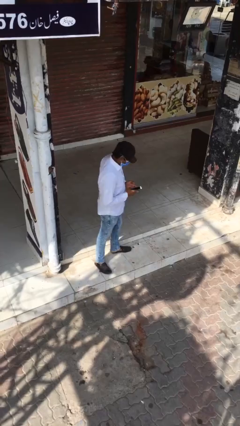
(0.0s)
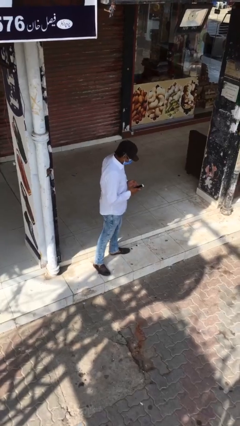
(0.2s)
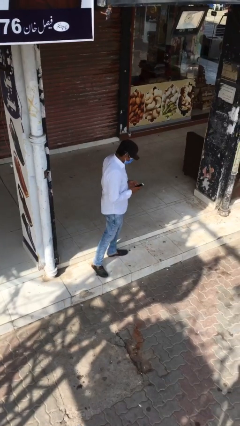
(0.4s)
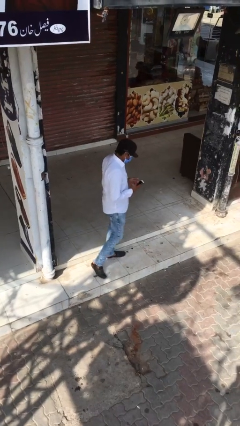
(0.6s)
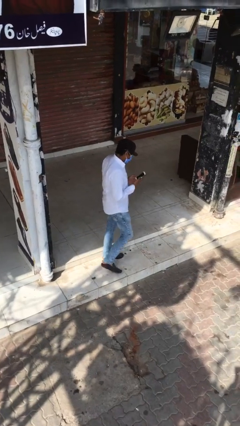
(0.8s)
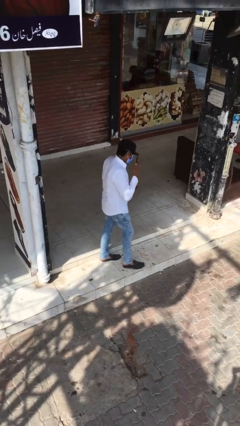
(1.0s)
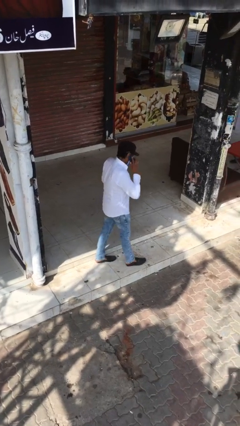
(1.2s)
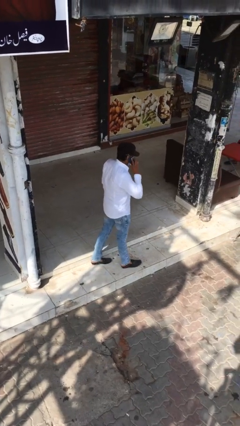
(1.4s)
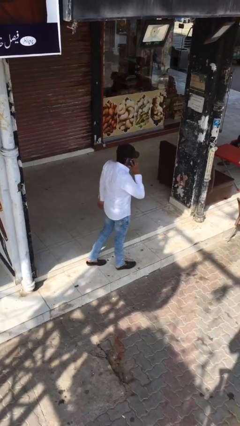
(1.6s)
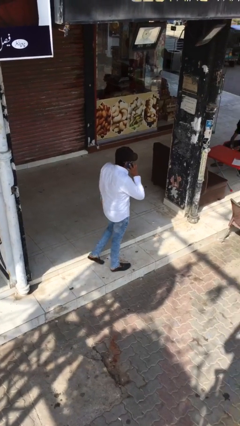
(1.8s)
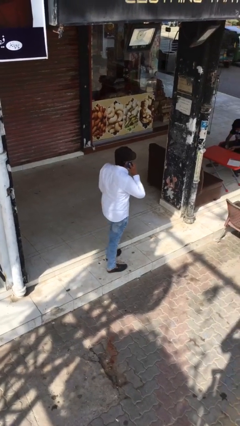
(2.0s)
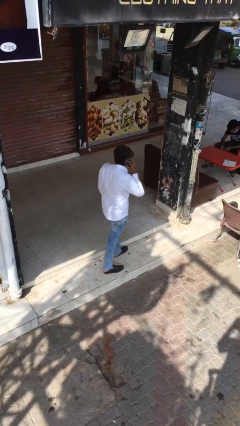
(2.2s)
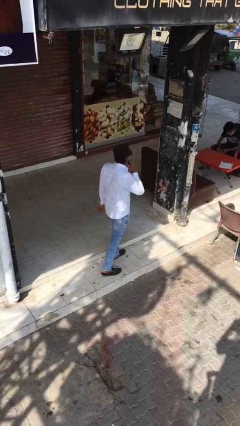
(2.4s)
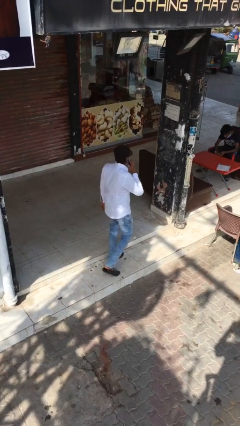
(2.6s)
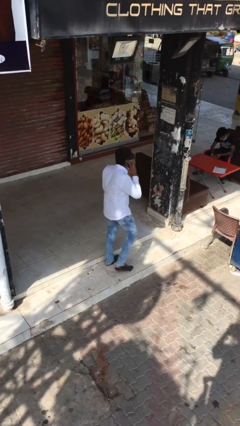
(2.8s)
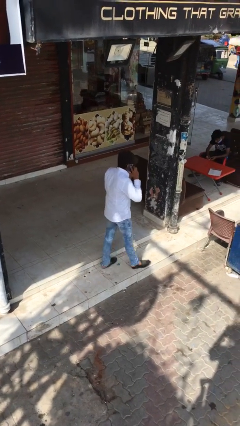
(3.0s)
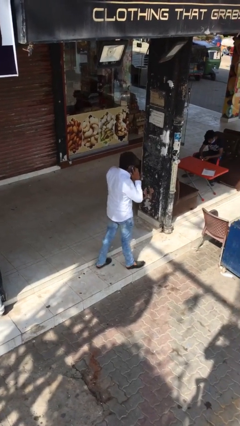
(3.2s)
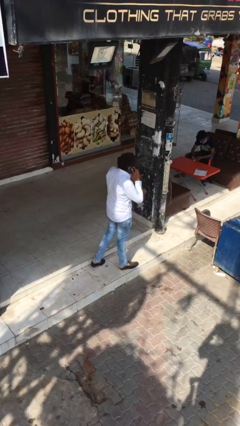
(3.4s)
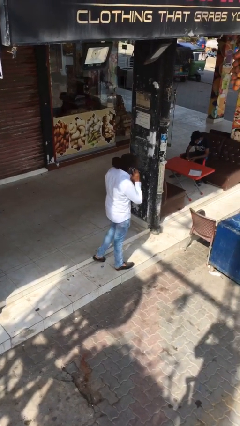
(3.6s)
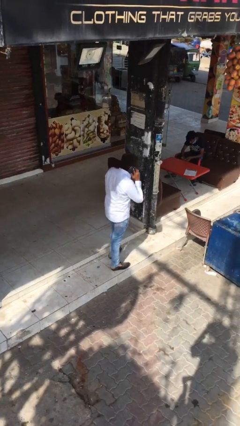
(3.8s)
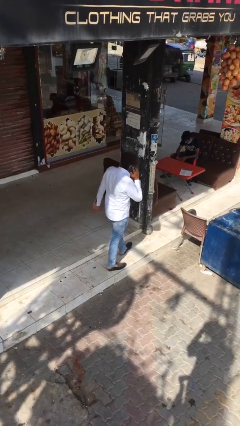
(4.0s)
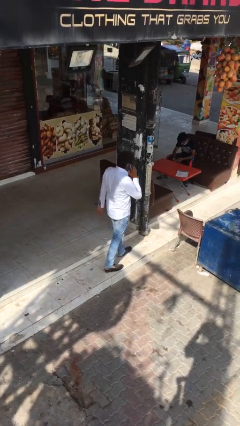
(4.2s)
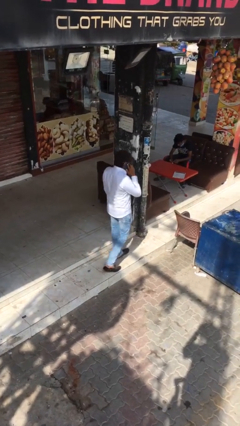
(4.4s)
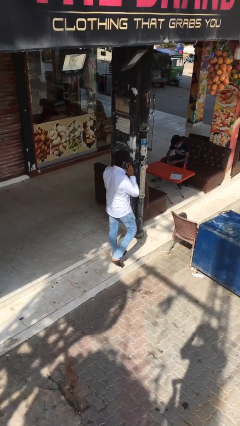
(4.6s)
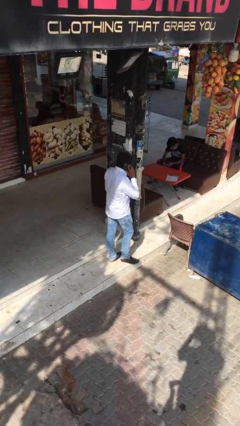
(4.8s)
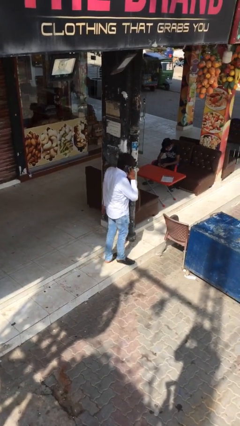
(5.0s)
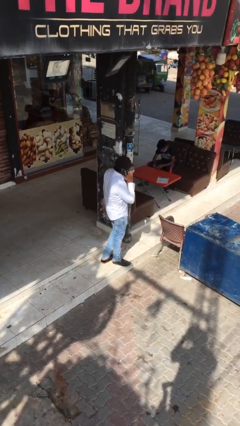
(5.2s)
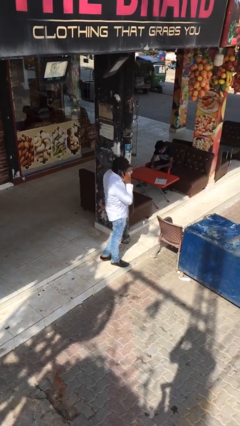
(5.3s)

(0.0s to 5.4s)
person talks on phone

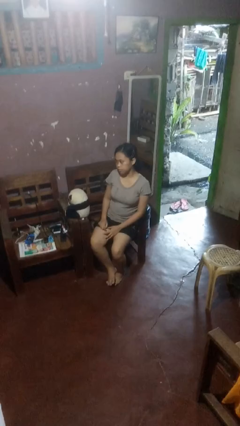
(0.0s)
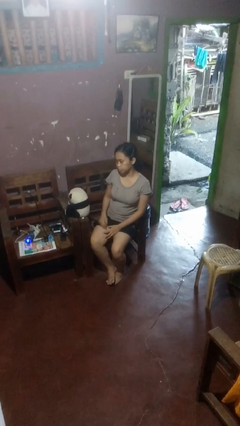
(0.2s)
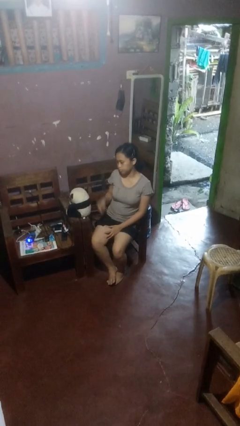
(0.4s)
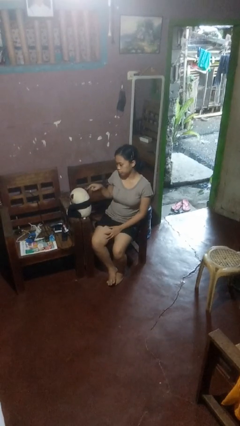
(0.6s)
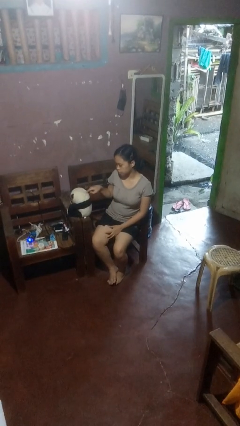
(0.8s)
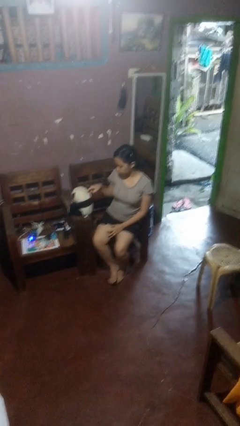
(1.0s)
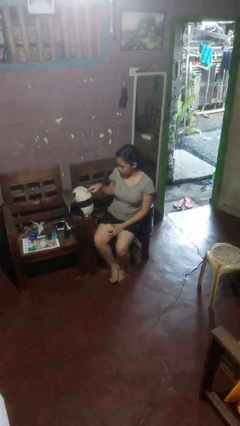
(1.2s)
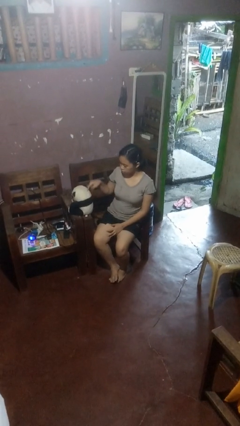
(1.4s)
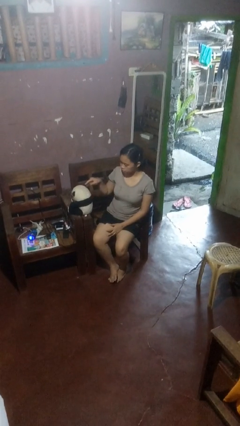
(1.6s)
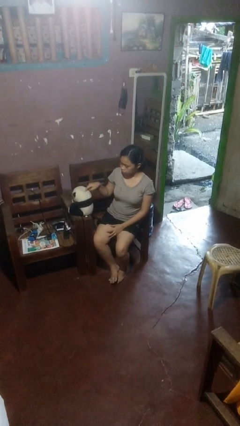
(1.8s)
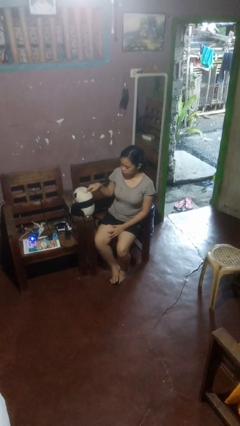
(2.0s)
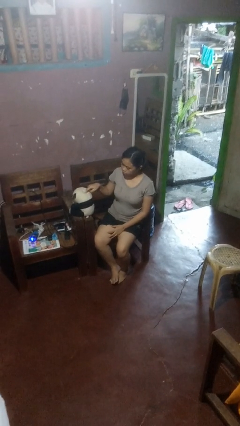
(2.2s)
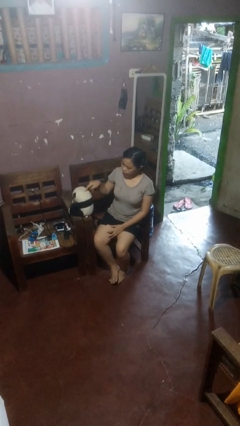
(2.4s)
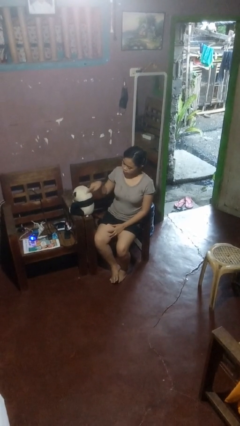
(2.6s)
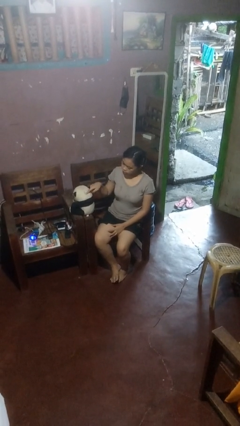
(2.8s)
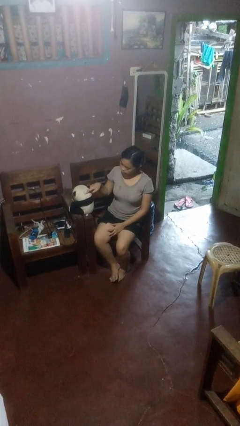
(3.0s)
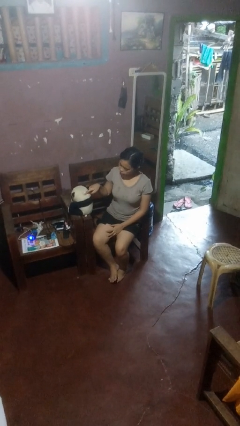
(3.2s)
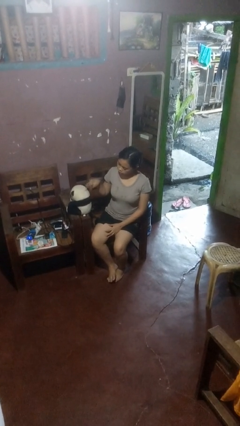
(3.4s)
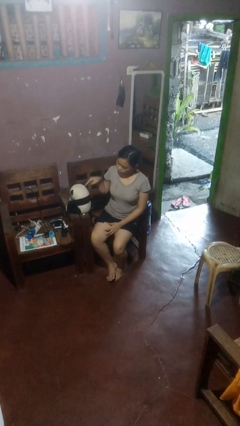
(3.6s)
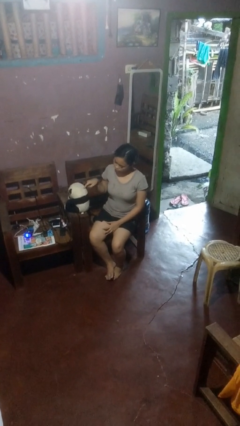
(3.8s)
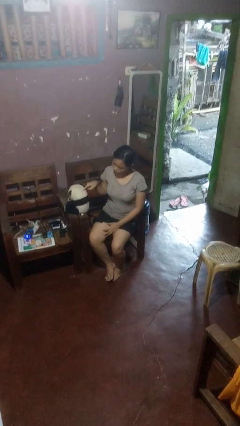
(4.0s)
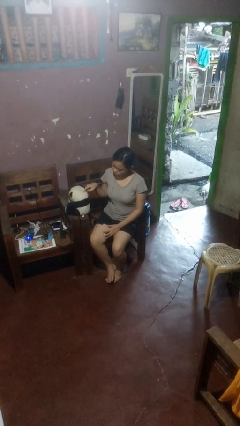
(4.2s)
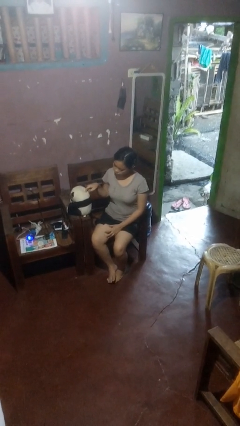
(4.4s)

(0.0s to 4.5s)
person taps object with finger

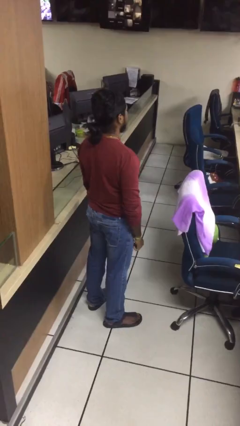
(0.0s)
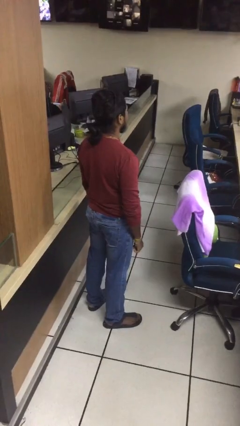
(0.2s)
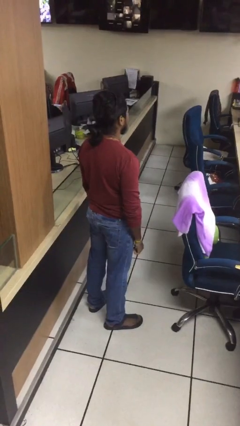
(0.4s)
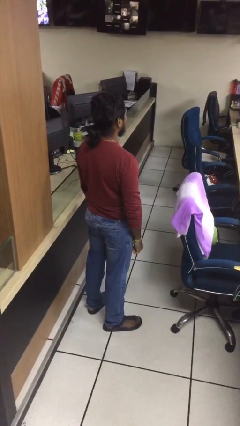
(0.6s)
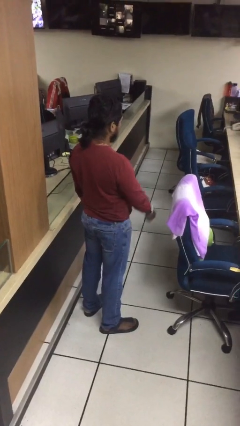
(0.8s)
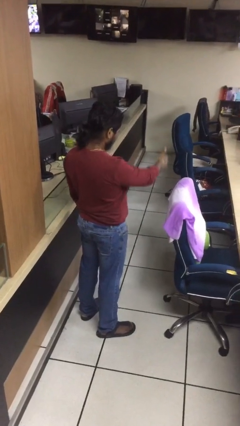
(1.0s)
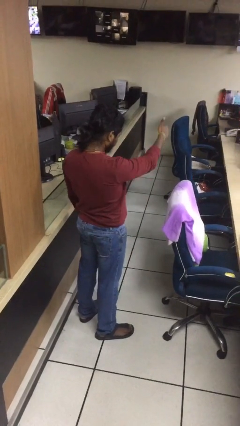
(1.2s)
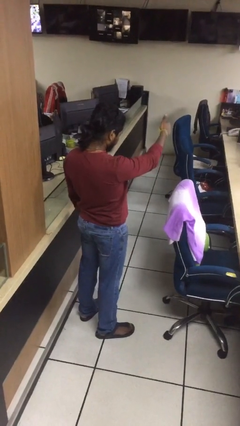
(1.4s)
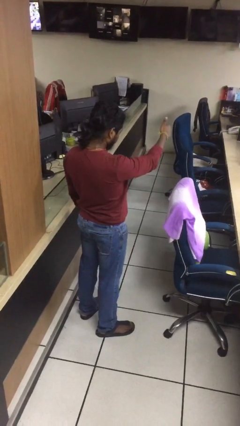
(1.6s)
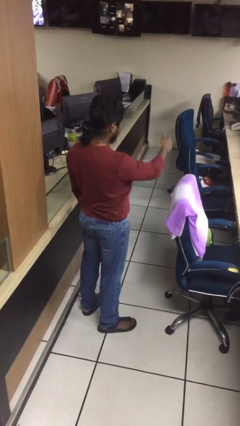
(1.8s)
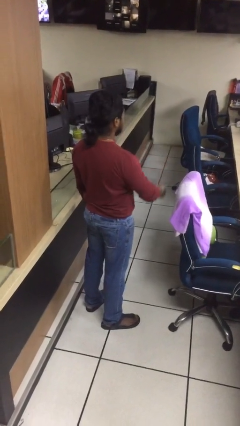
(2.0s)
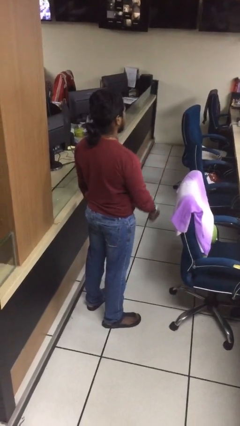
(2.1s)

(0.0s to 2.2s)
person gestures thumbs up

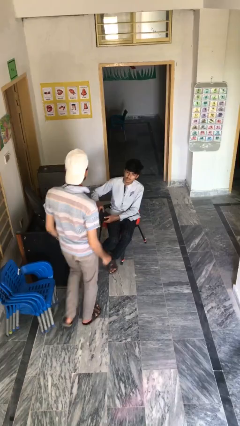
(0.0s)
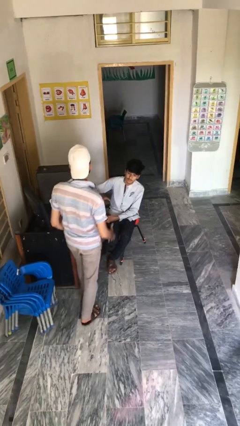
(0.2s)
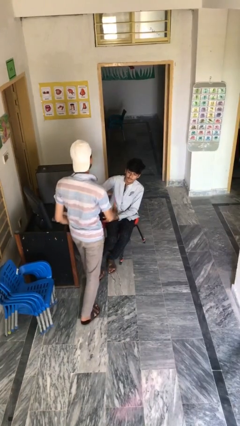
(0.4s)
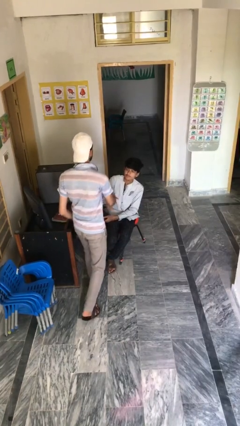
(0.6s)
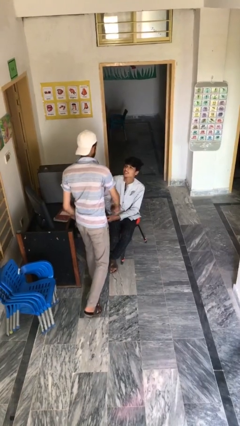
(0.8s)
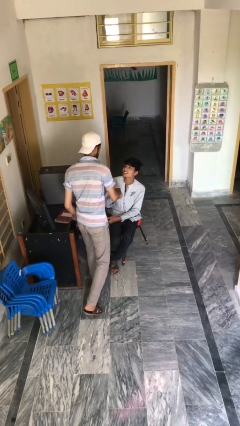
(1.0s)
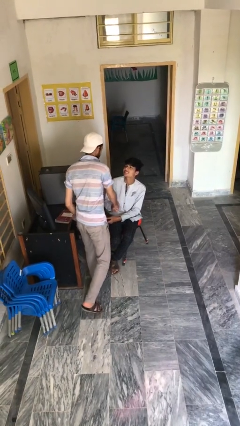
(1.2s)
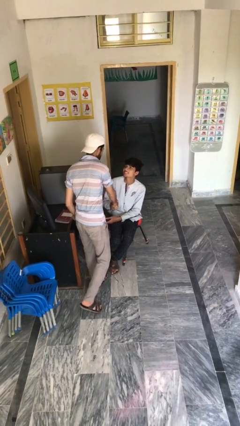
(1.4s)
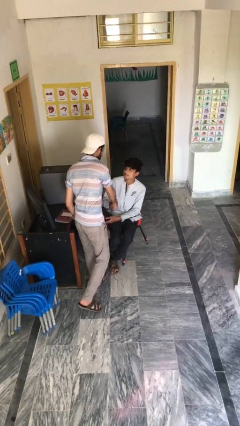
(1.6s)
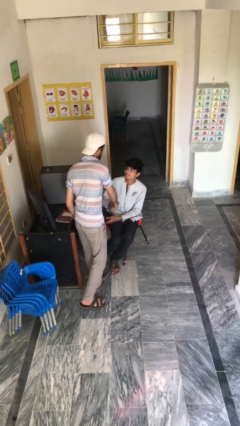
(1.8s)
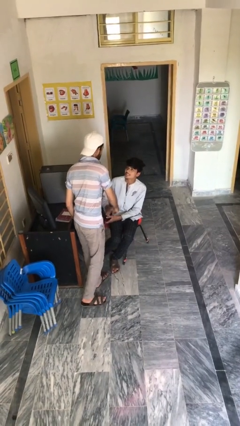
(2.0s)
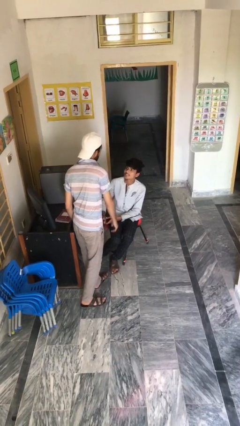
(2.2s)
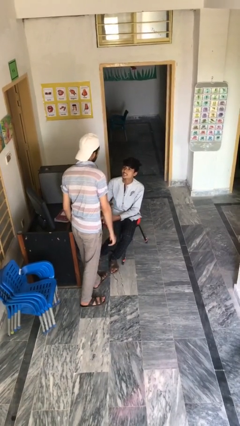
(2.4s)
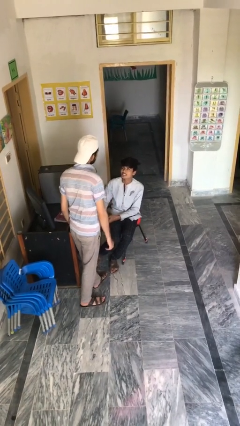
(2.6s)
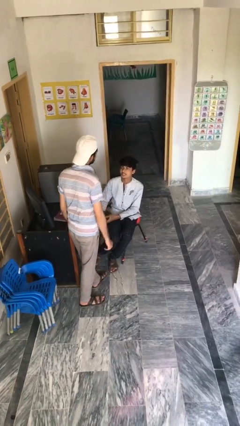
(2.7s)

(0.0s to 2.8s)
person shakes hand

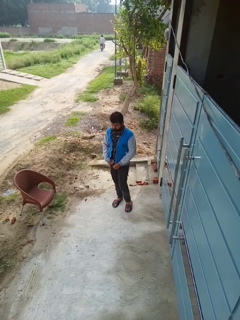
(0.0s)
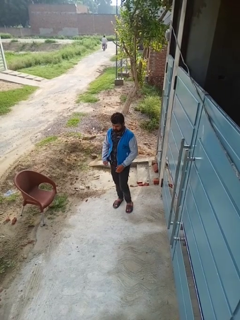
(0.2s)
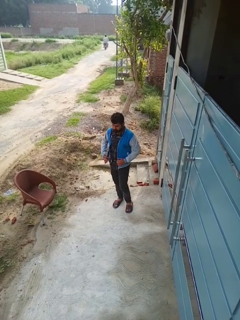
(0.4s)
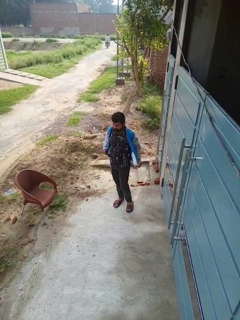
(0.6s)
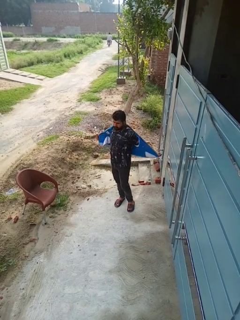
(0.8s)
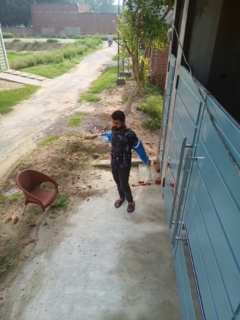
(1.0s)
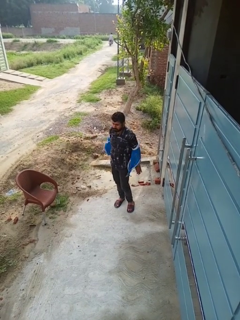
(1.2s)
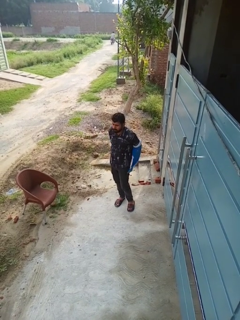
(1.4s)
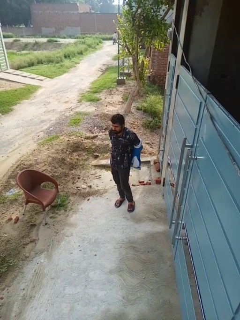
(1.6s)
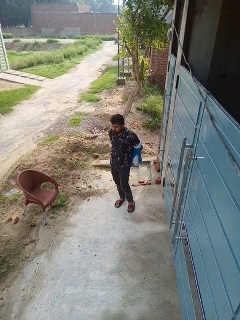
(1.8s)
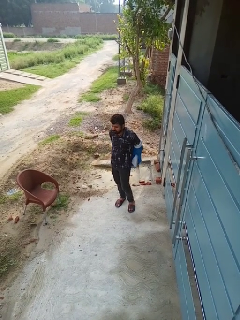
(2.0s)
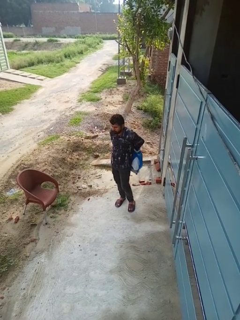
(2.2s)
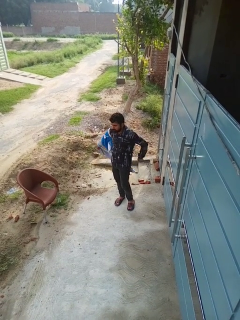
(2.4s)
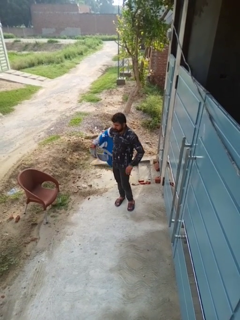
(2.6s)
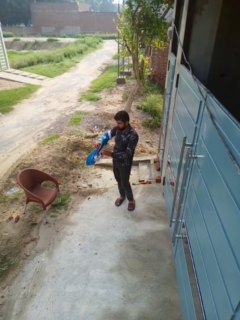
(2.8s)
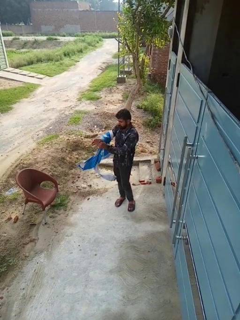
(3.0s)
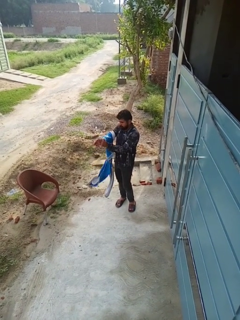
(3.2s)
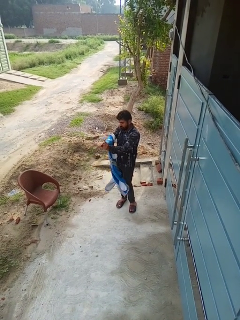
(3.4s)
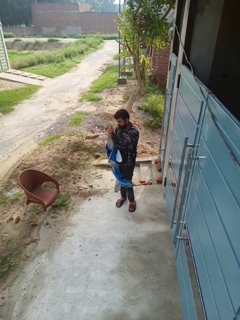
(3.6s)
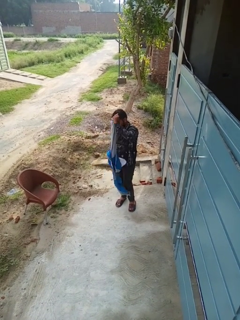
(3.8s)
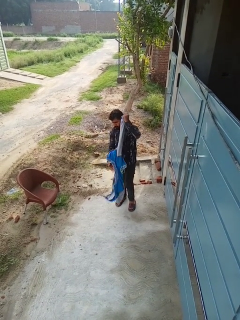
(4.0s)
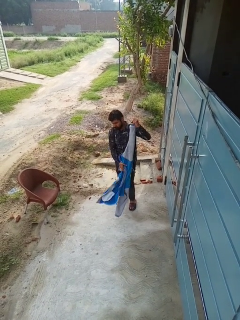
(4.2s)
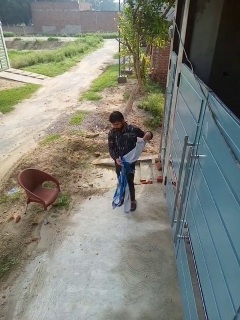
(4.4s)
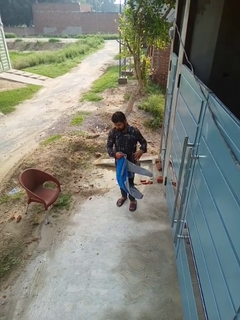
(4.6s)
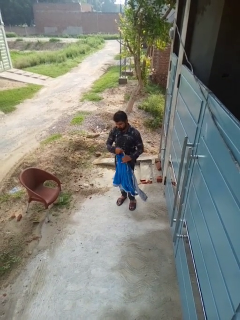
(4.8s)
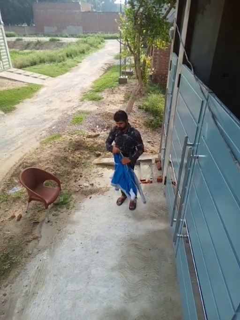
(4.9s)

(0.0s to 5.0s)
person takes off jacket
